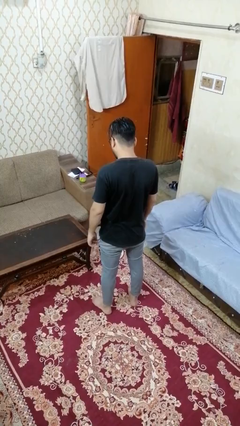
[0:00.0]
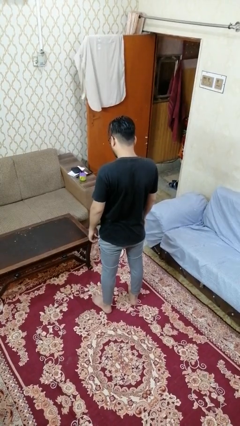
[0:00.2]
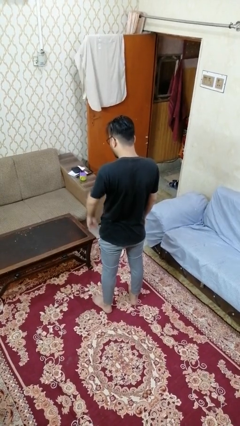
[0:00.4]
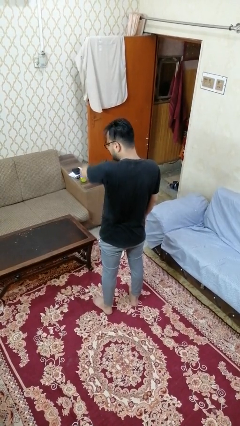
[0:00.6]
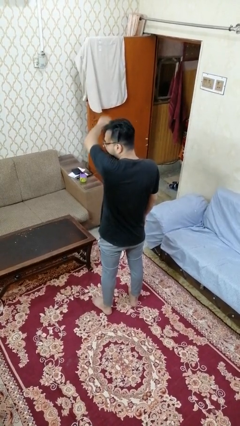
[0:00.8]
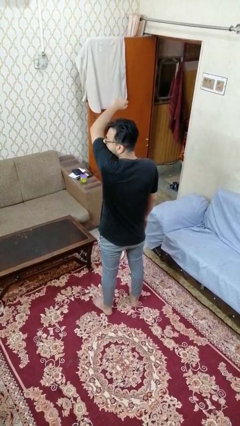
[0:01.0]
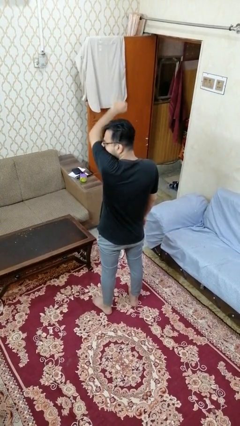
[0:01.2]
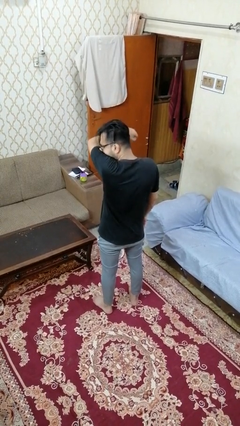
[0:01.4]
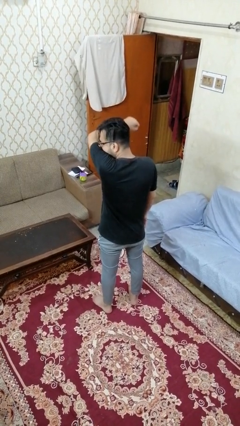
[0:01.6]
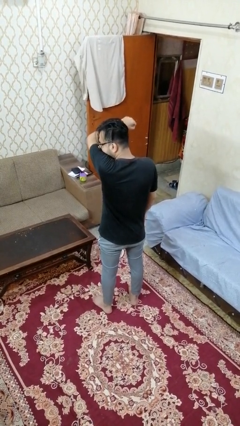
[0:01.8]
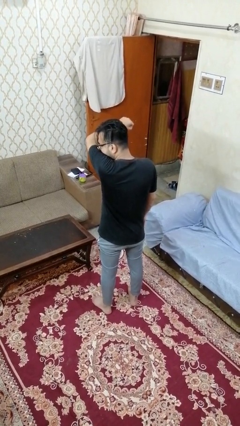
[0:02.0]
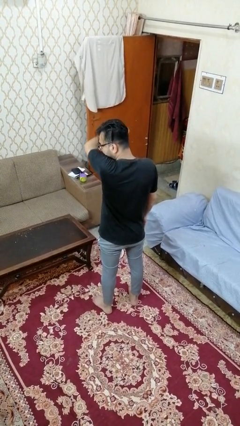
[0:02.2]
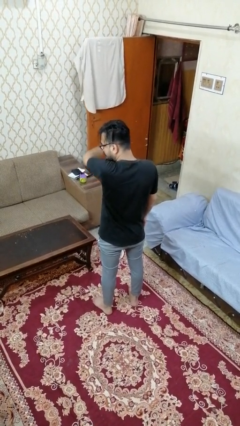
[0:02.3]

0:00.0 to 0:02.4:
person sneezes into arm

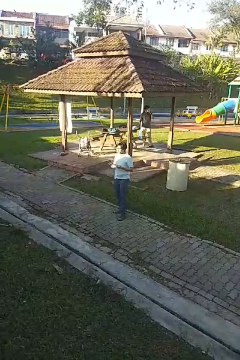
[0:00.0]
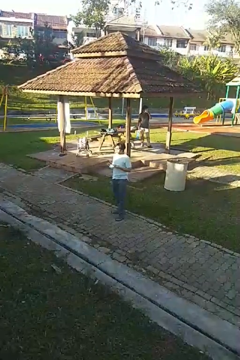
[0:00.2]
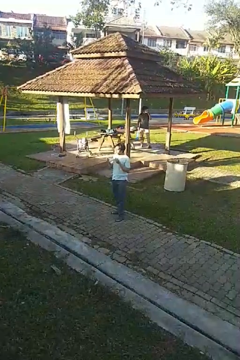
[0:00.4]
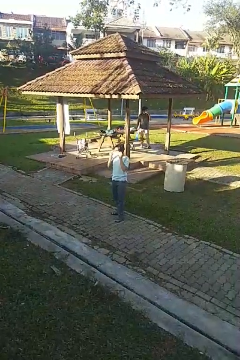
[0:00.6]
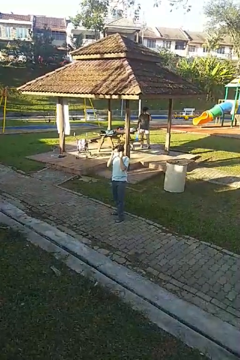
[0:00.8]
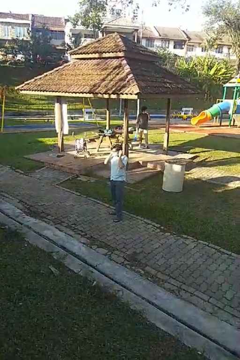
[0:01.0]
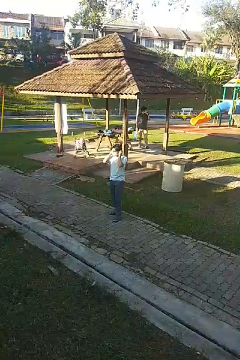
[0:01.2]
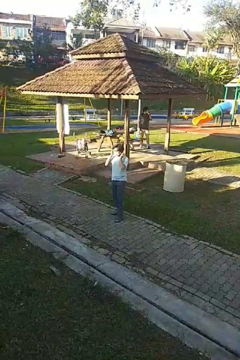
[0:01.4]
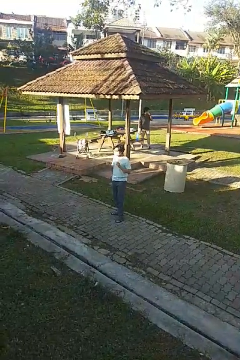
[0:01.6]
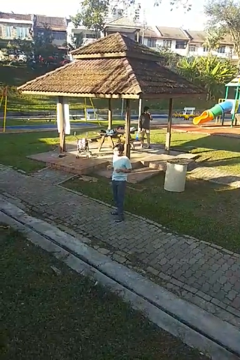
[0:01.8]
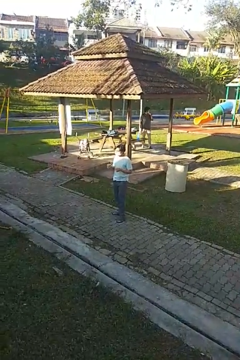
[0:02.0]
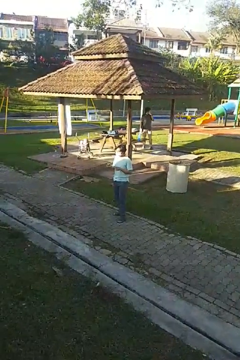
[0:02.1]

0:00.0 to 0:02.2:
person puts on facemask

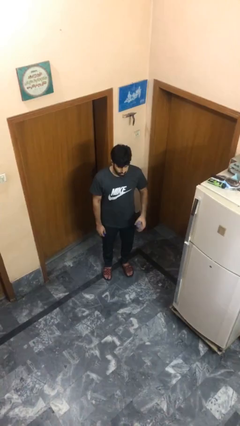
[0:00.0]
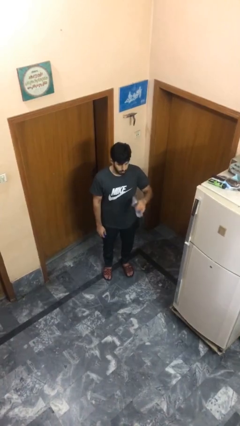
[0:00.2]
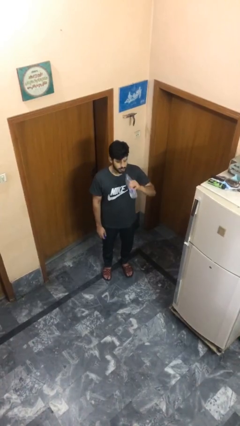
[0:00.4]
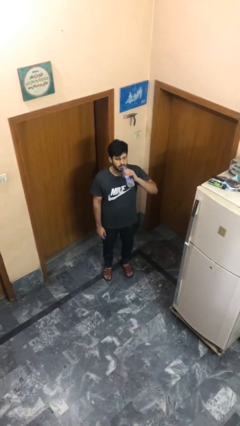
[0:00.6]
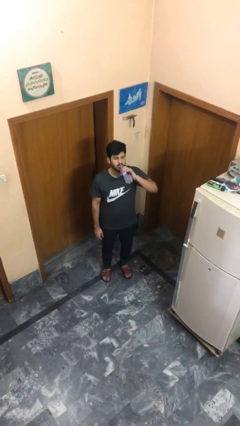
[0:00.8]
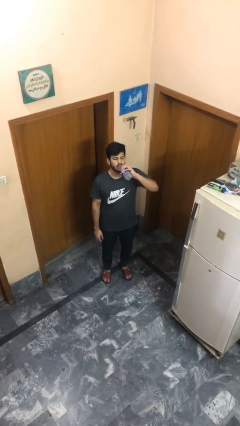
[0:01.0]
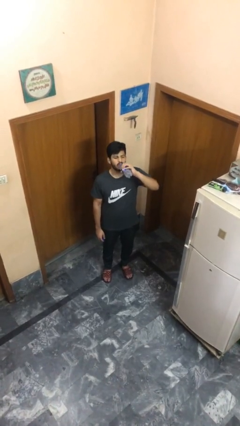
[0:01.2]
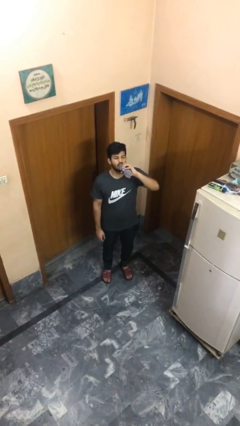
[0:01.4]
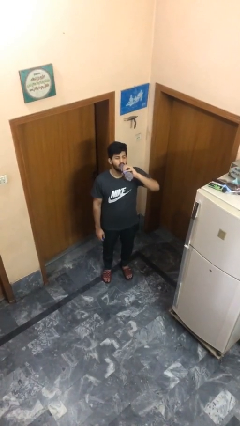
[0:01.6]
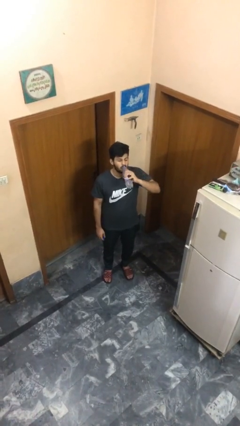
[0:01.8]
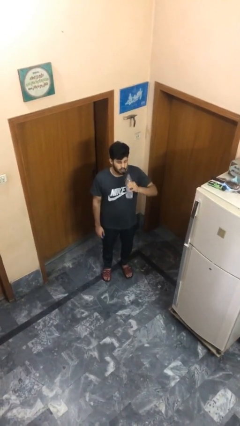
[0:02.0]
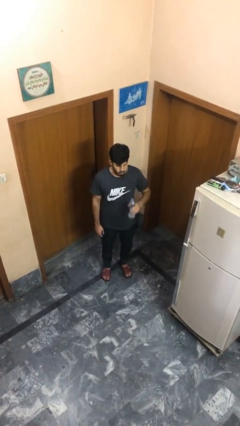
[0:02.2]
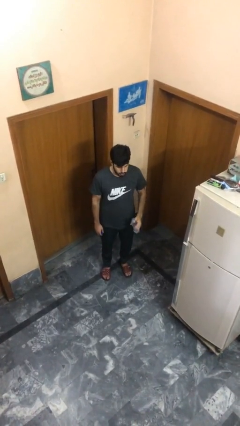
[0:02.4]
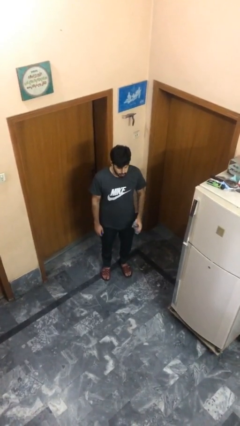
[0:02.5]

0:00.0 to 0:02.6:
person drinks from bottle

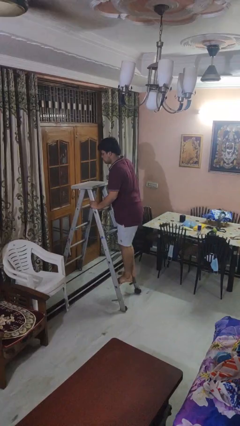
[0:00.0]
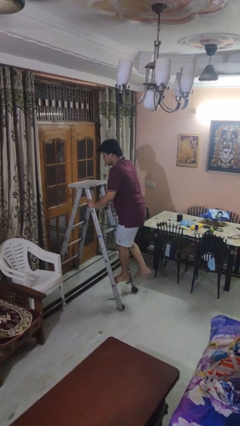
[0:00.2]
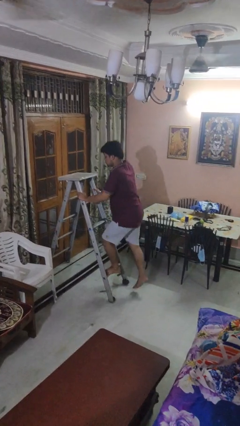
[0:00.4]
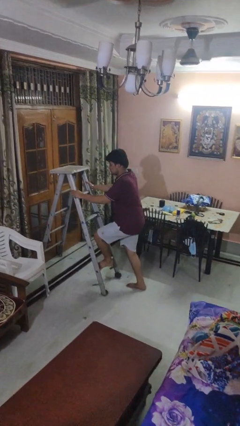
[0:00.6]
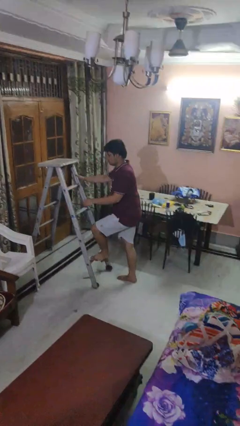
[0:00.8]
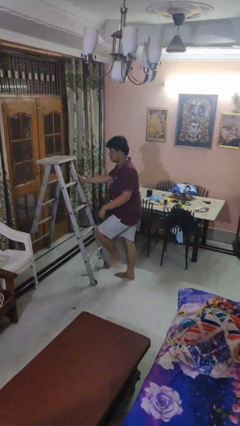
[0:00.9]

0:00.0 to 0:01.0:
person climbs down ladder

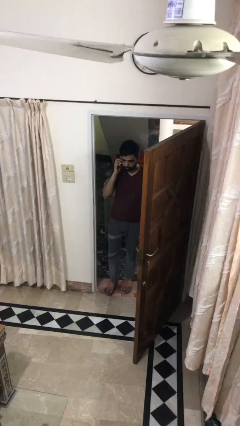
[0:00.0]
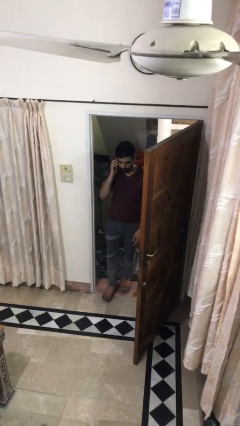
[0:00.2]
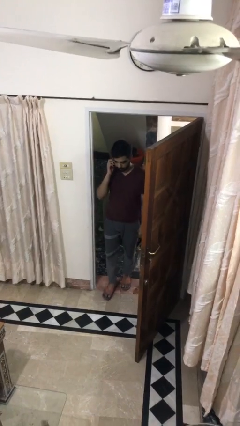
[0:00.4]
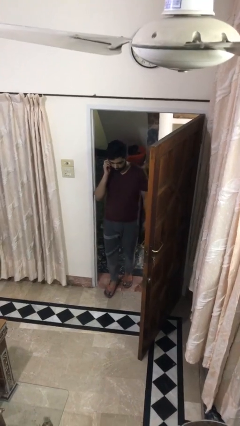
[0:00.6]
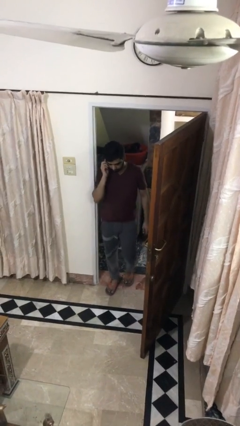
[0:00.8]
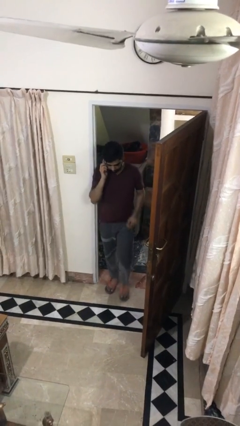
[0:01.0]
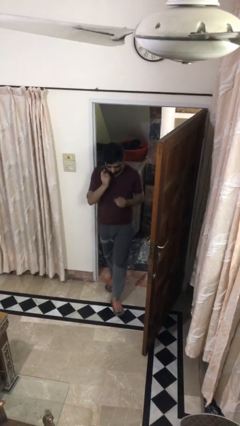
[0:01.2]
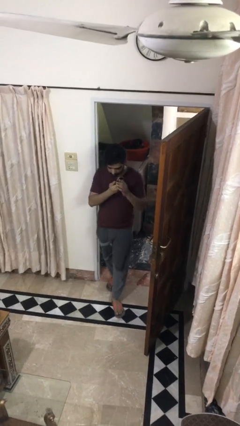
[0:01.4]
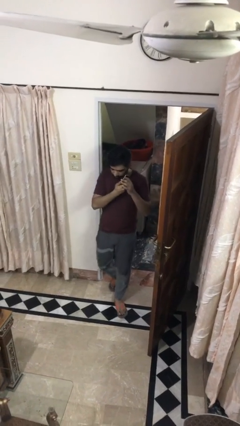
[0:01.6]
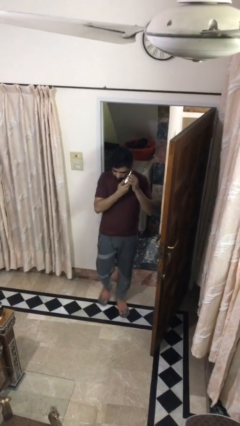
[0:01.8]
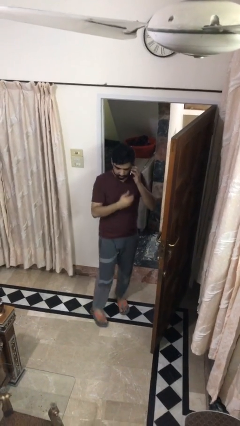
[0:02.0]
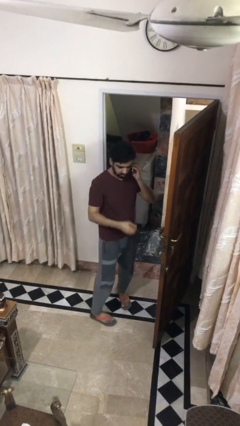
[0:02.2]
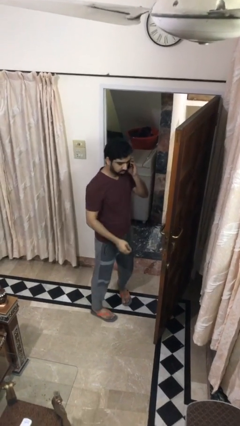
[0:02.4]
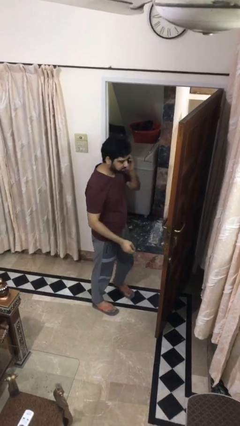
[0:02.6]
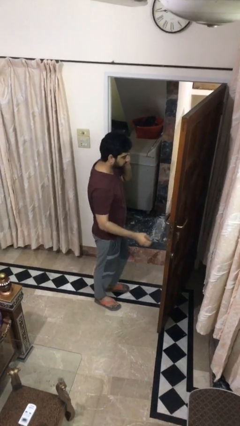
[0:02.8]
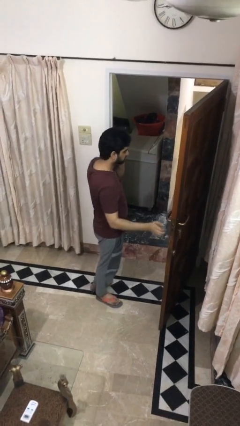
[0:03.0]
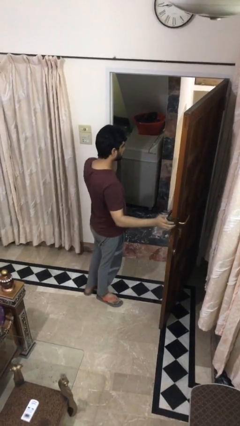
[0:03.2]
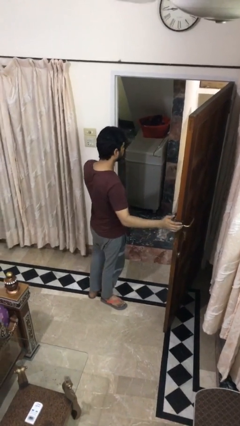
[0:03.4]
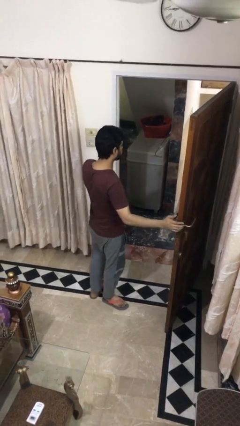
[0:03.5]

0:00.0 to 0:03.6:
person enters scene through structure

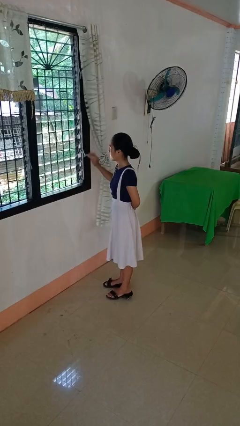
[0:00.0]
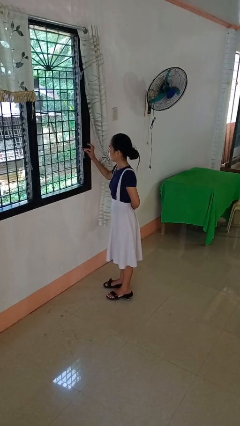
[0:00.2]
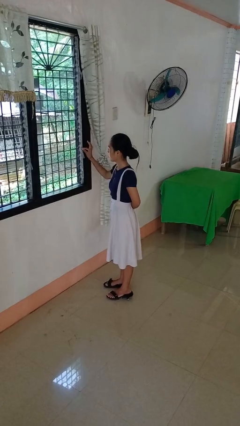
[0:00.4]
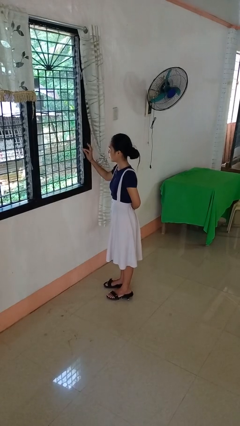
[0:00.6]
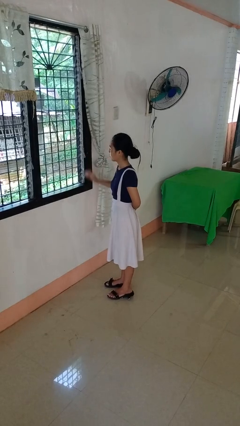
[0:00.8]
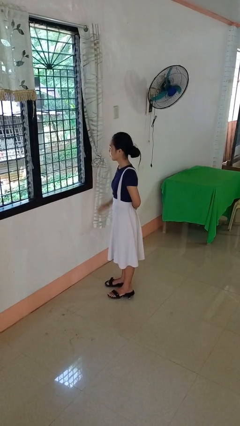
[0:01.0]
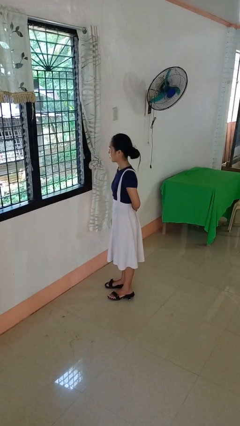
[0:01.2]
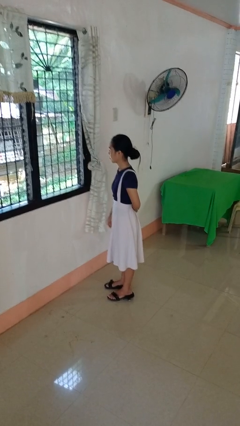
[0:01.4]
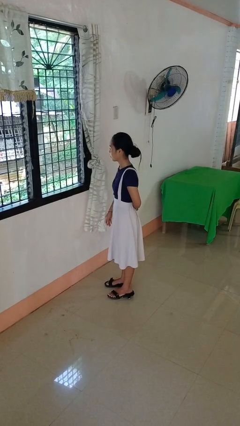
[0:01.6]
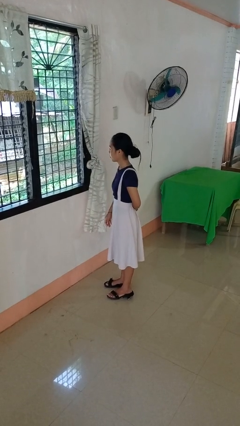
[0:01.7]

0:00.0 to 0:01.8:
person closes home window

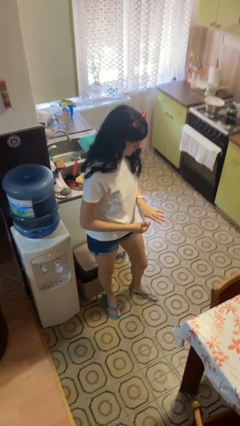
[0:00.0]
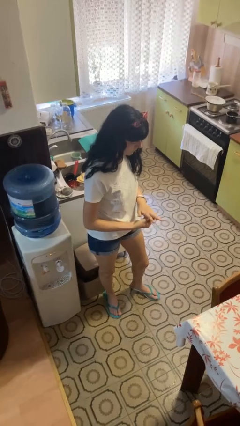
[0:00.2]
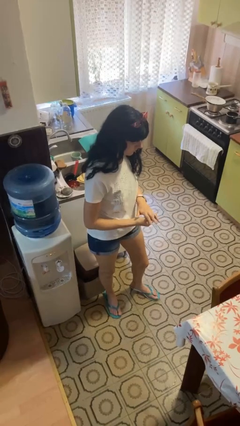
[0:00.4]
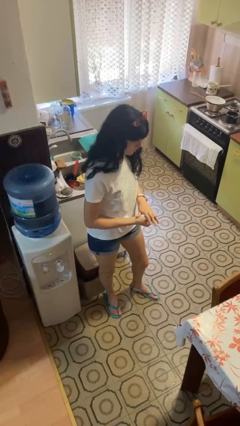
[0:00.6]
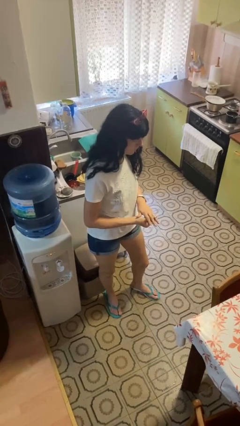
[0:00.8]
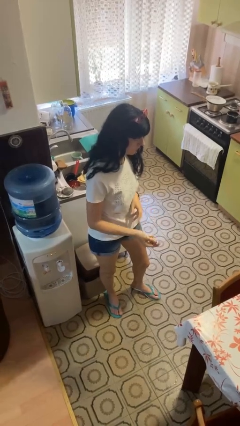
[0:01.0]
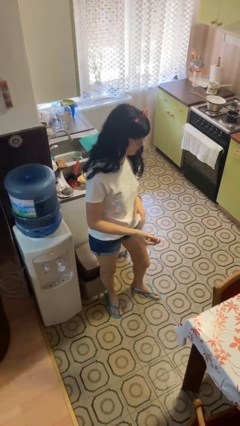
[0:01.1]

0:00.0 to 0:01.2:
person takes off ring

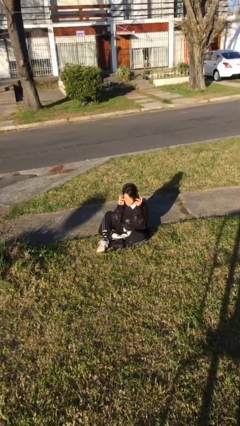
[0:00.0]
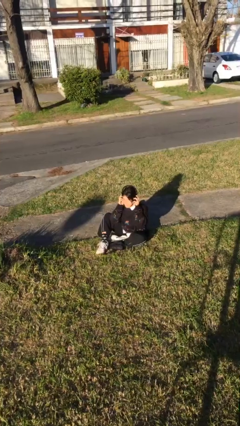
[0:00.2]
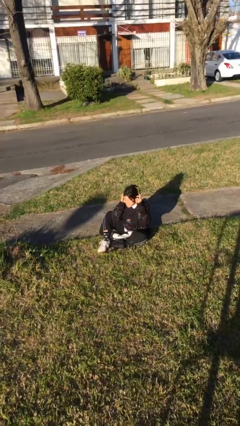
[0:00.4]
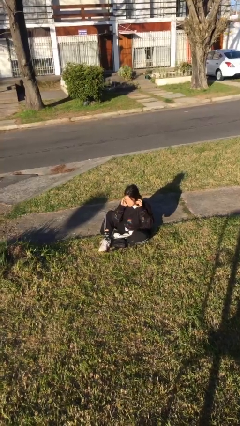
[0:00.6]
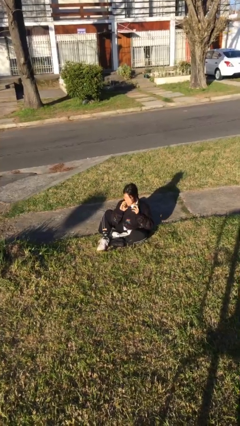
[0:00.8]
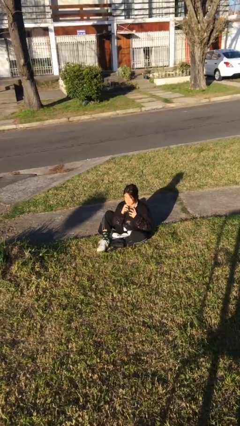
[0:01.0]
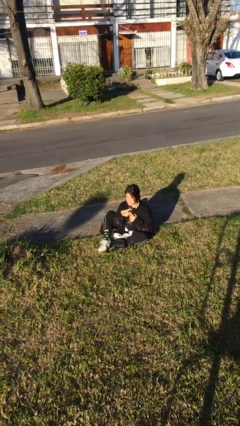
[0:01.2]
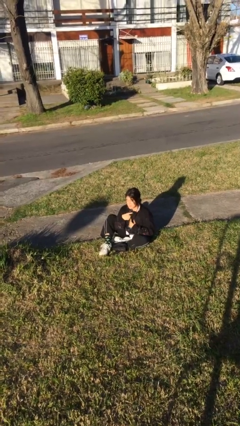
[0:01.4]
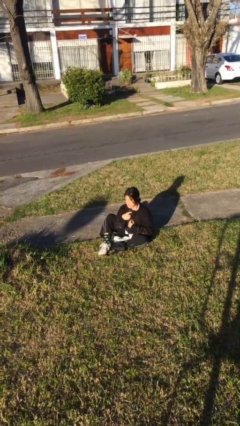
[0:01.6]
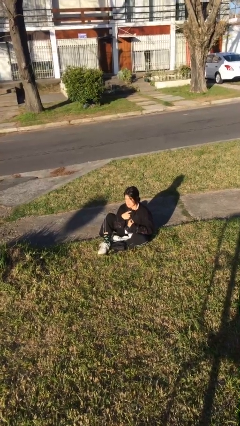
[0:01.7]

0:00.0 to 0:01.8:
person takes off headphones

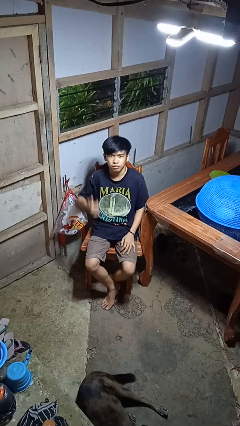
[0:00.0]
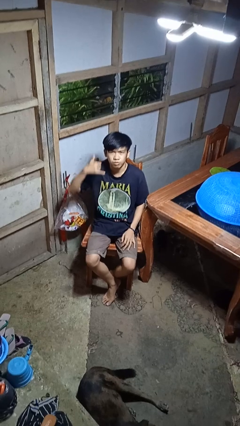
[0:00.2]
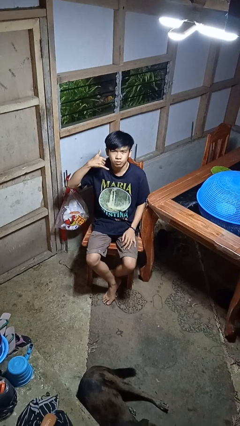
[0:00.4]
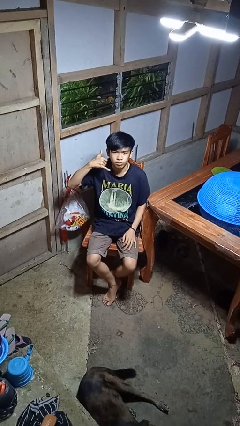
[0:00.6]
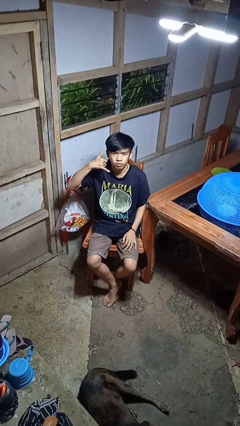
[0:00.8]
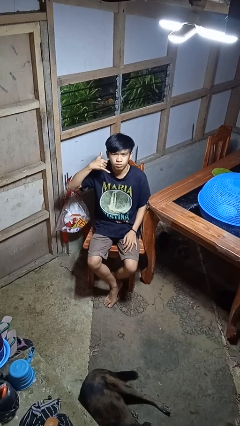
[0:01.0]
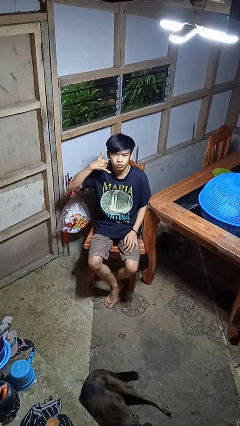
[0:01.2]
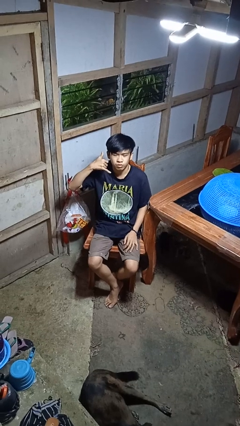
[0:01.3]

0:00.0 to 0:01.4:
person gestures call me
